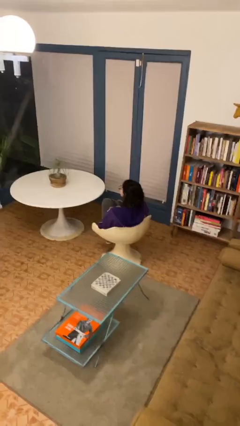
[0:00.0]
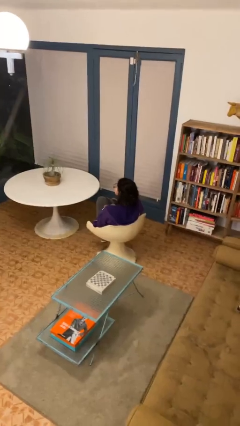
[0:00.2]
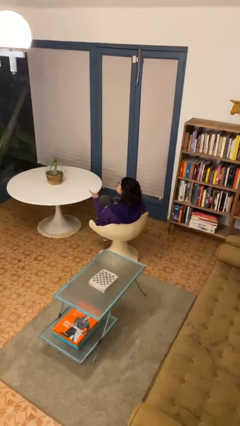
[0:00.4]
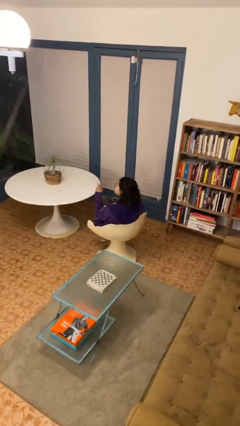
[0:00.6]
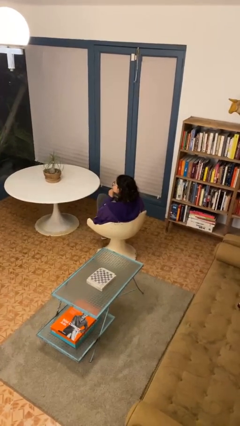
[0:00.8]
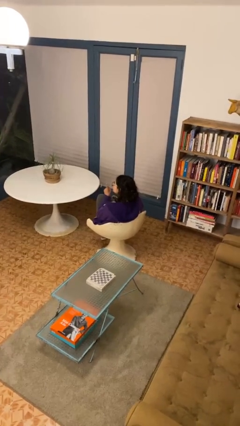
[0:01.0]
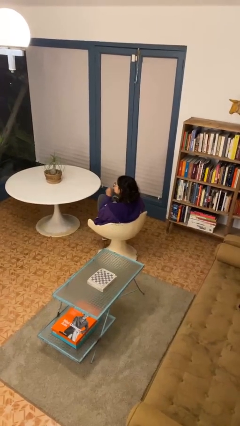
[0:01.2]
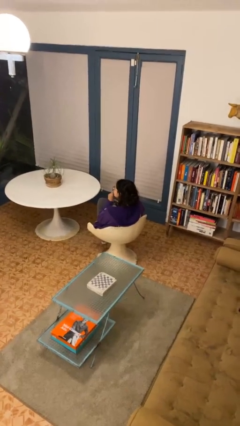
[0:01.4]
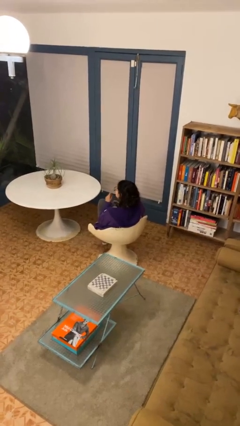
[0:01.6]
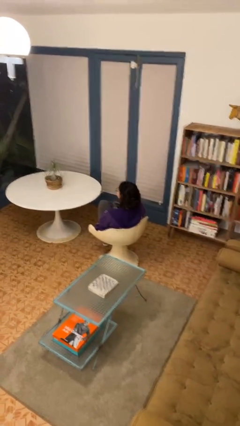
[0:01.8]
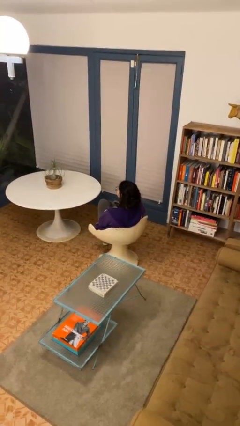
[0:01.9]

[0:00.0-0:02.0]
person gestures be quiet

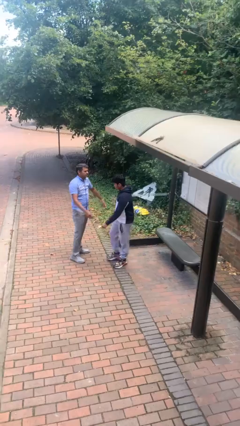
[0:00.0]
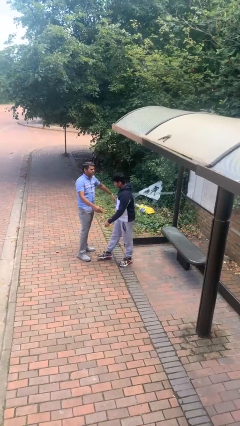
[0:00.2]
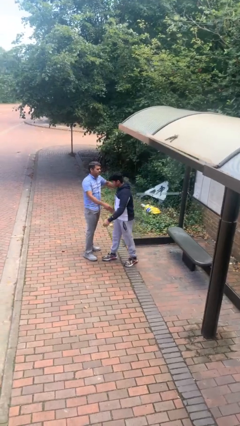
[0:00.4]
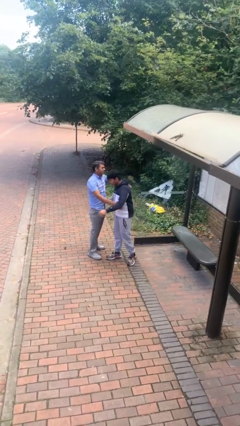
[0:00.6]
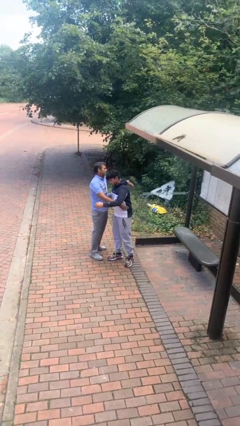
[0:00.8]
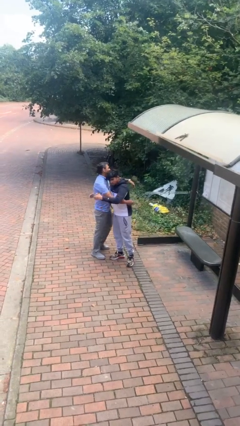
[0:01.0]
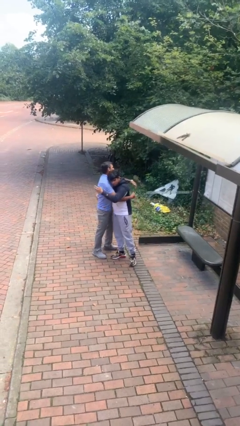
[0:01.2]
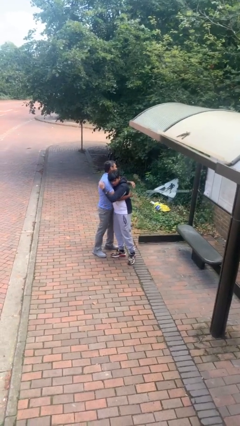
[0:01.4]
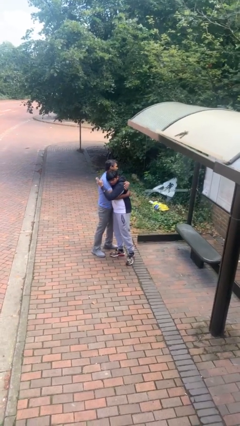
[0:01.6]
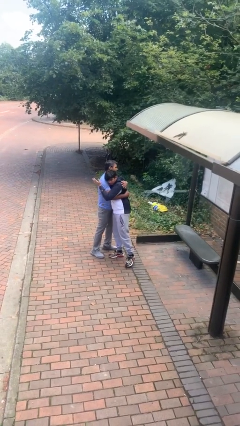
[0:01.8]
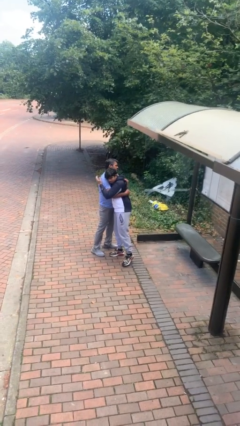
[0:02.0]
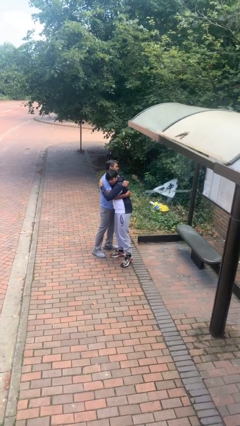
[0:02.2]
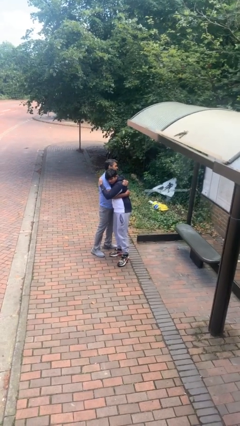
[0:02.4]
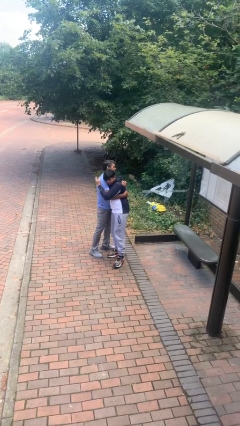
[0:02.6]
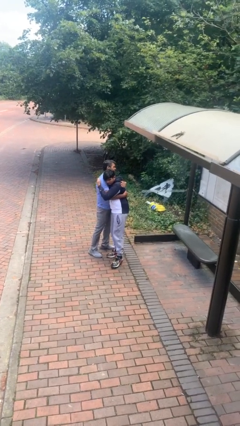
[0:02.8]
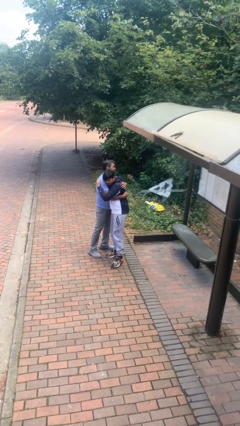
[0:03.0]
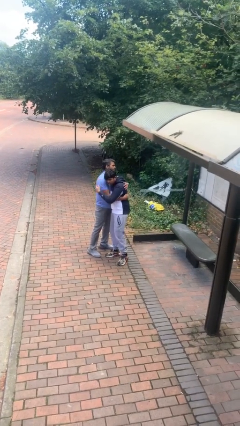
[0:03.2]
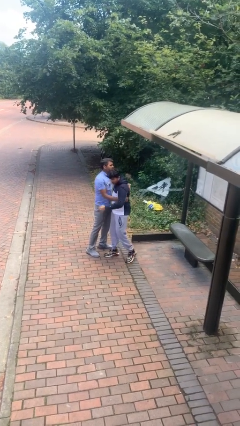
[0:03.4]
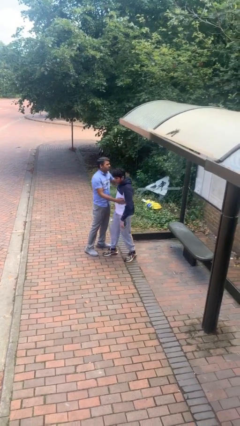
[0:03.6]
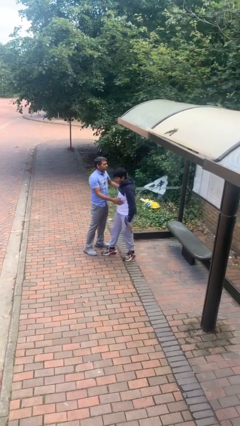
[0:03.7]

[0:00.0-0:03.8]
person embraces person

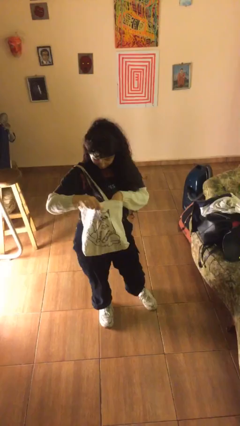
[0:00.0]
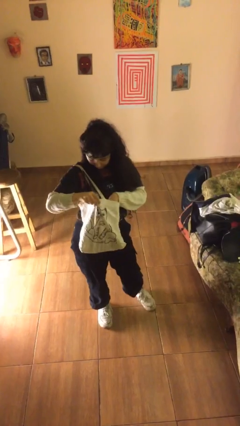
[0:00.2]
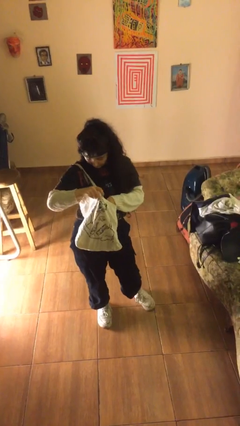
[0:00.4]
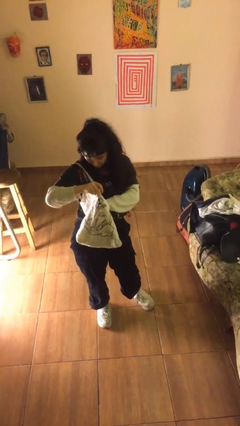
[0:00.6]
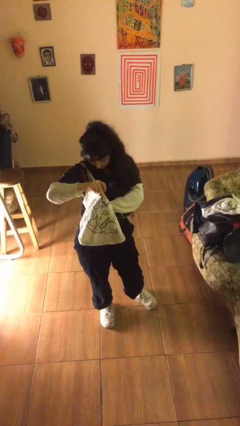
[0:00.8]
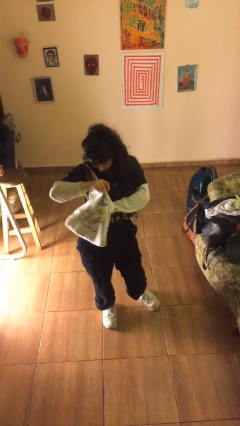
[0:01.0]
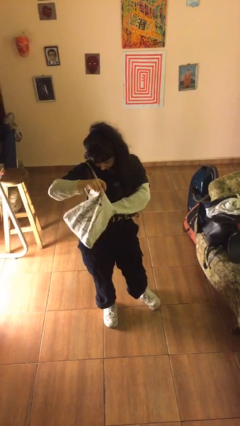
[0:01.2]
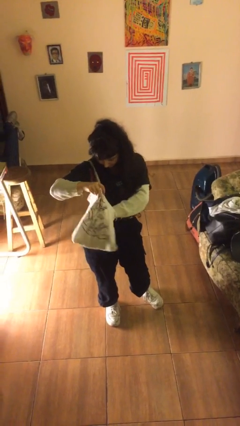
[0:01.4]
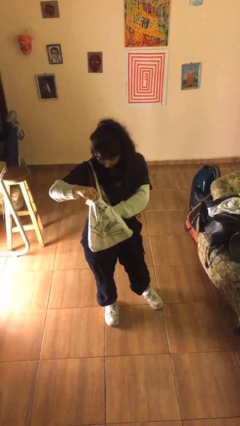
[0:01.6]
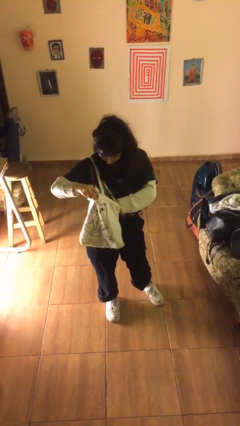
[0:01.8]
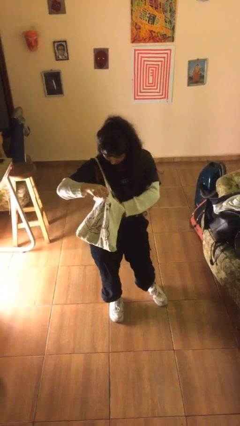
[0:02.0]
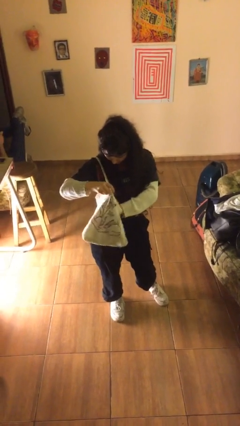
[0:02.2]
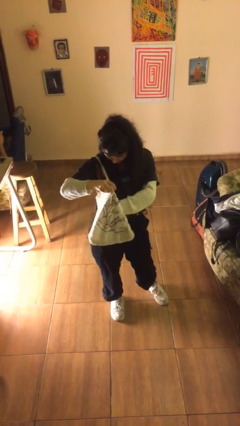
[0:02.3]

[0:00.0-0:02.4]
person searches in purse

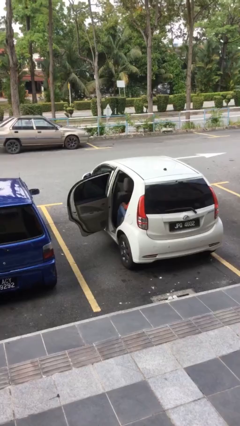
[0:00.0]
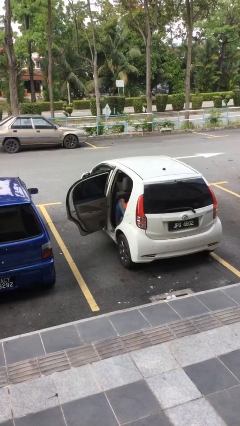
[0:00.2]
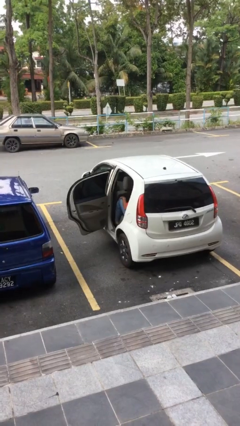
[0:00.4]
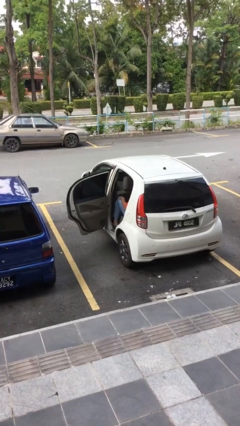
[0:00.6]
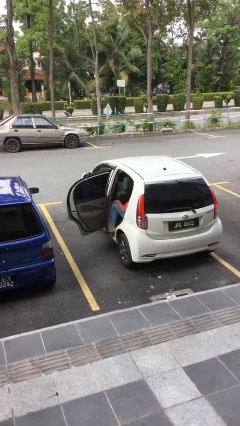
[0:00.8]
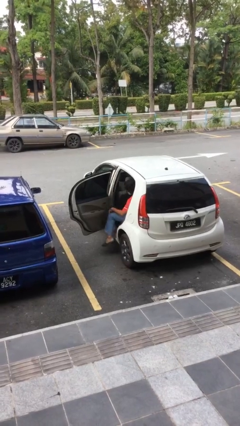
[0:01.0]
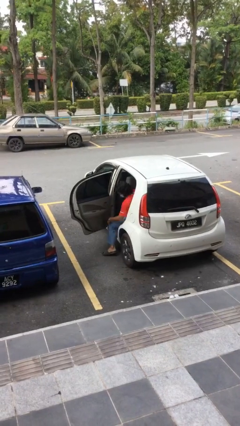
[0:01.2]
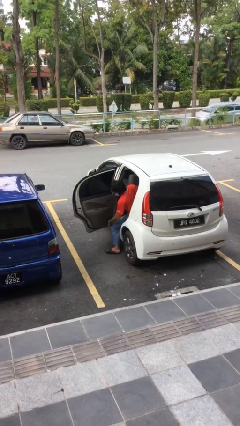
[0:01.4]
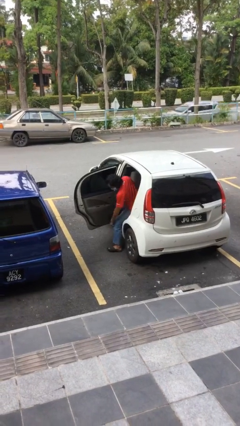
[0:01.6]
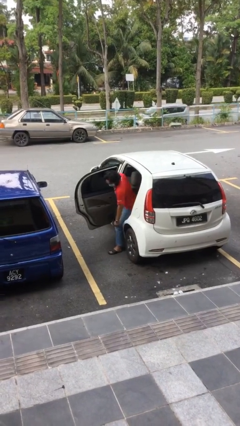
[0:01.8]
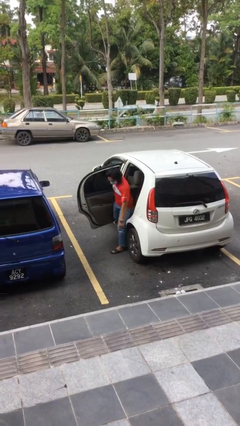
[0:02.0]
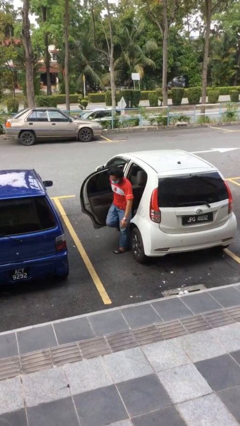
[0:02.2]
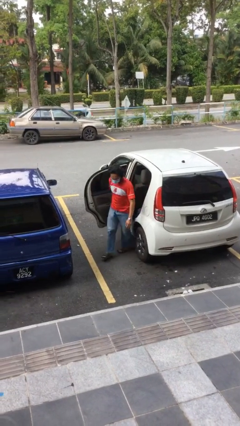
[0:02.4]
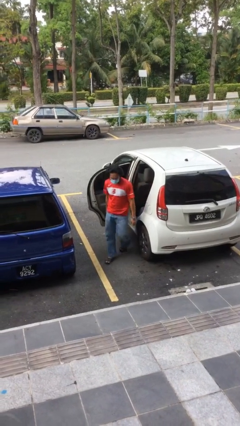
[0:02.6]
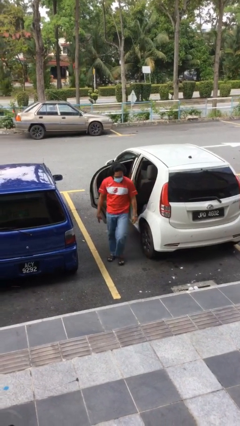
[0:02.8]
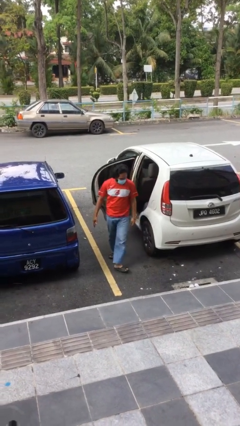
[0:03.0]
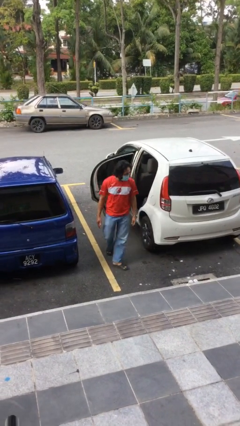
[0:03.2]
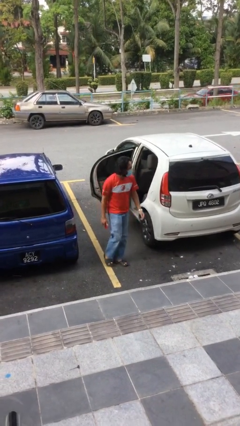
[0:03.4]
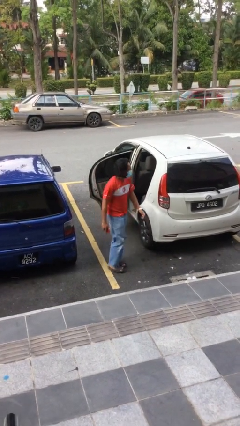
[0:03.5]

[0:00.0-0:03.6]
person exits car

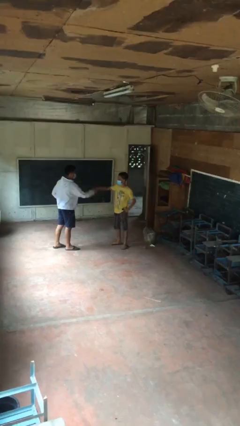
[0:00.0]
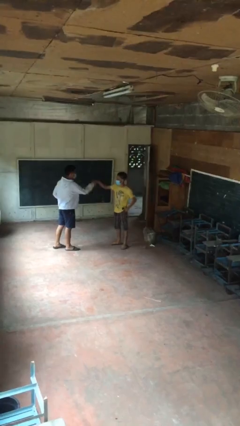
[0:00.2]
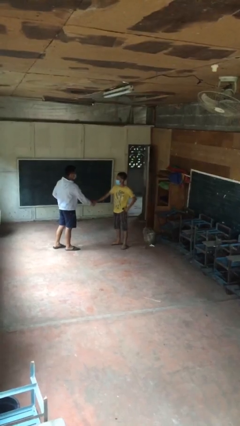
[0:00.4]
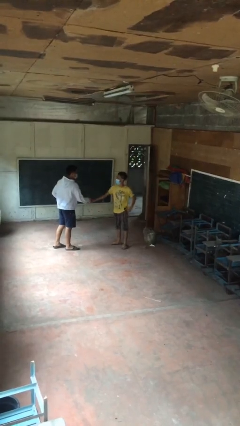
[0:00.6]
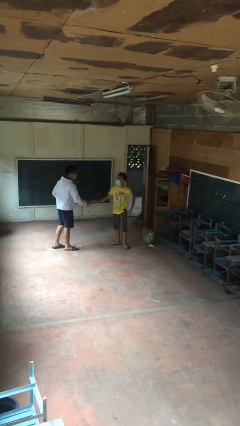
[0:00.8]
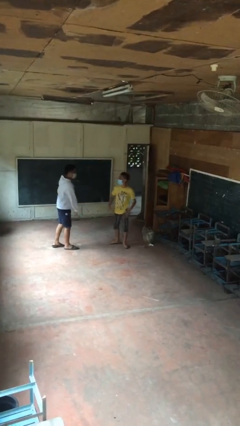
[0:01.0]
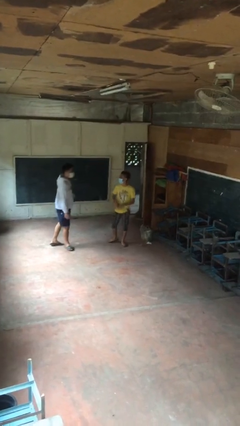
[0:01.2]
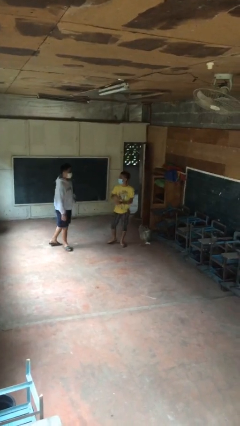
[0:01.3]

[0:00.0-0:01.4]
person shakes hand

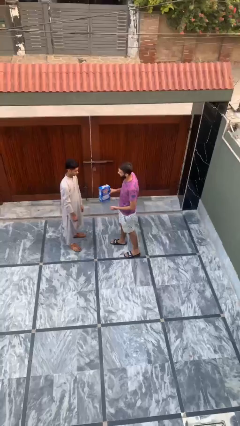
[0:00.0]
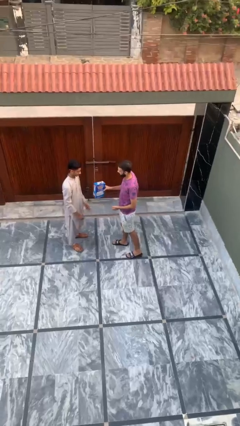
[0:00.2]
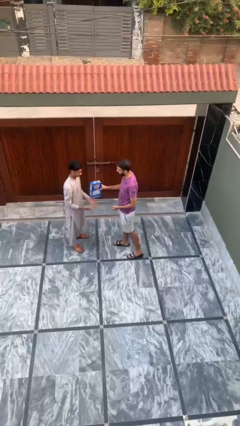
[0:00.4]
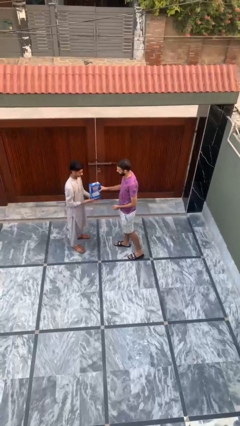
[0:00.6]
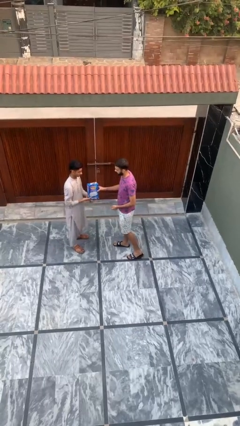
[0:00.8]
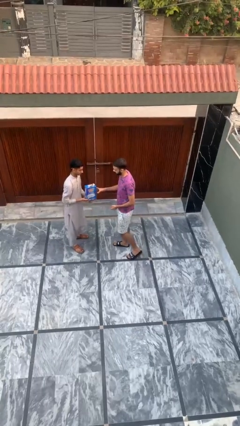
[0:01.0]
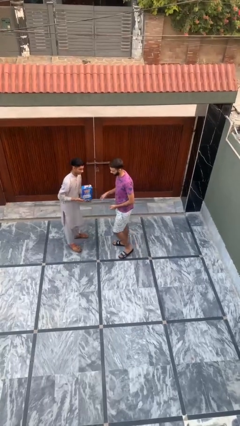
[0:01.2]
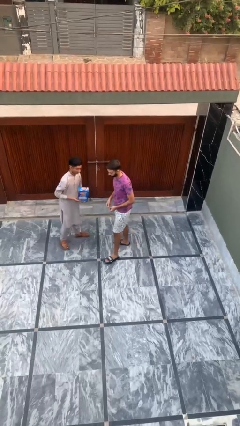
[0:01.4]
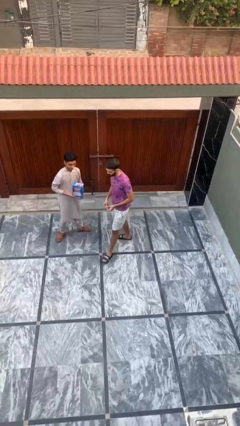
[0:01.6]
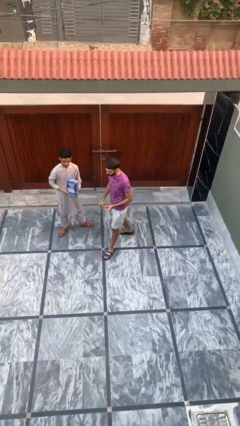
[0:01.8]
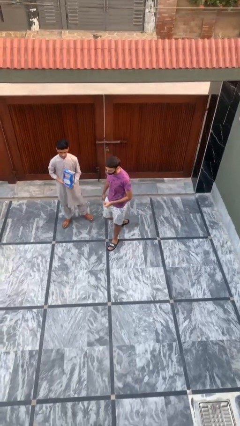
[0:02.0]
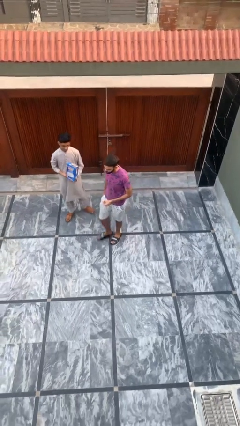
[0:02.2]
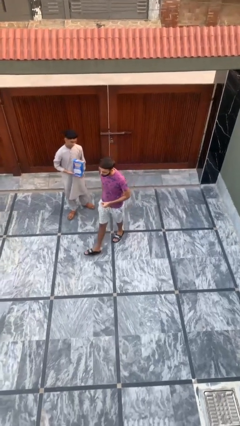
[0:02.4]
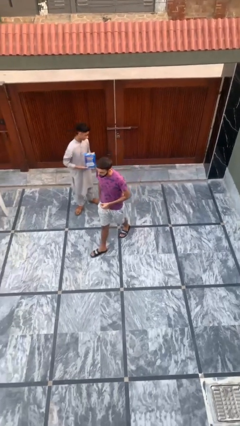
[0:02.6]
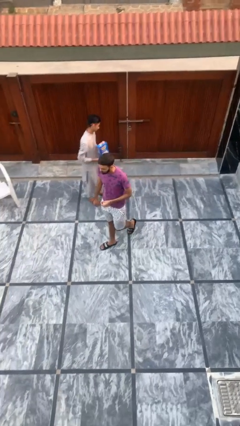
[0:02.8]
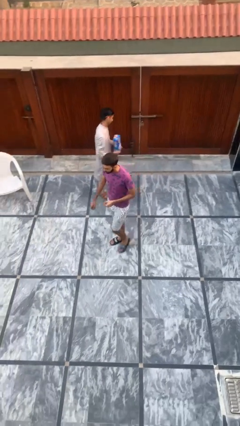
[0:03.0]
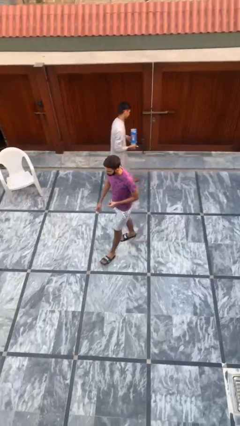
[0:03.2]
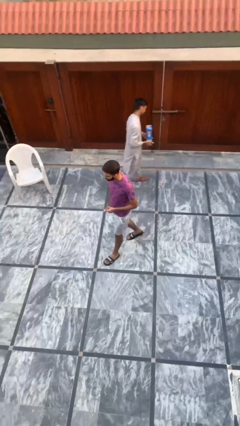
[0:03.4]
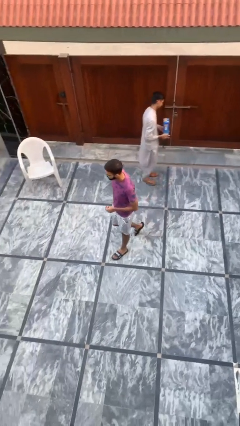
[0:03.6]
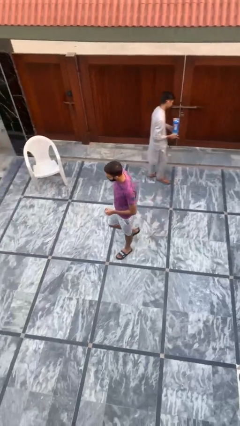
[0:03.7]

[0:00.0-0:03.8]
person transfers object to person

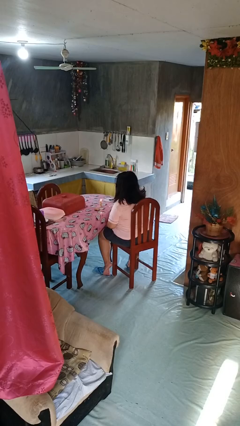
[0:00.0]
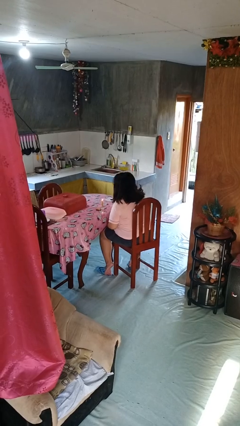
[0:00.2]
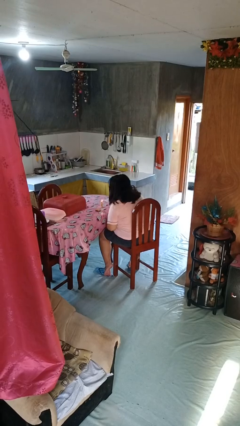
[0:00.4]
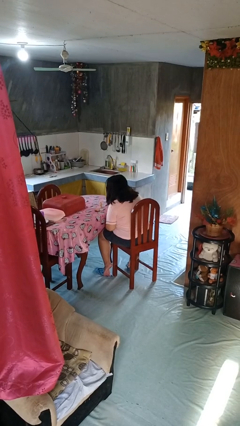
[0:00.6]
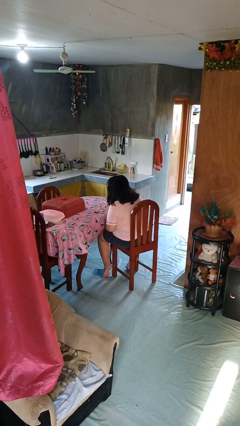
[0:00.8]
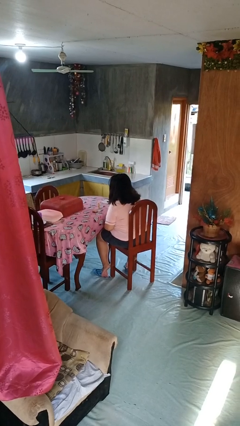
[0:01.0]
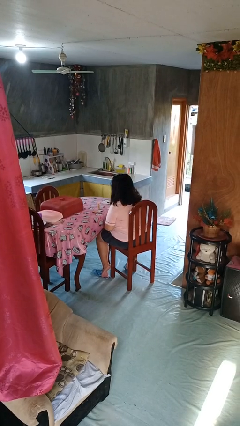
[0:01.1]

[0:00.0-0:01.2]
person extinguishes candle
